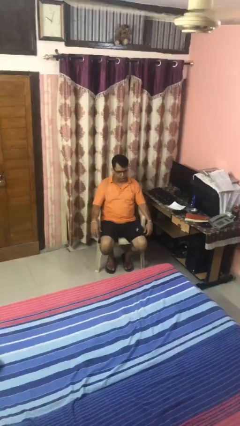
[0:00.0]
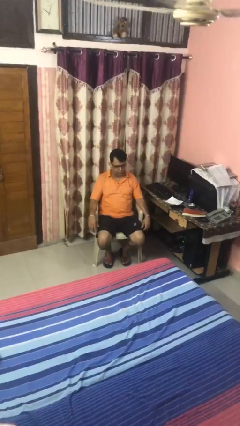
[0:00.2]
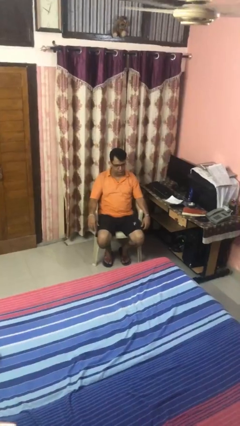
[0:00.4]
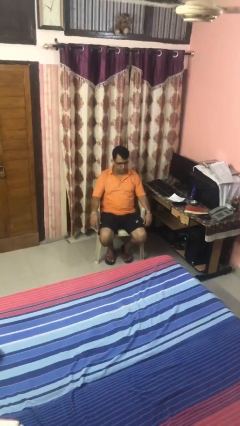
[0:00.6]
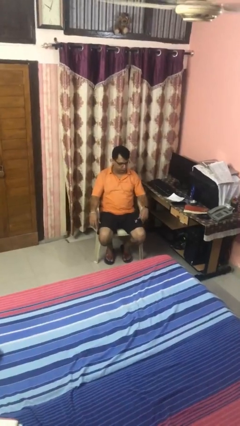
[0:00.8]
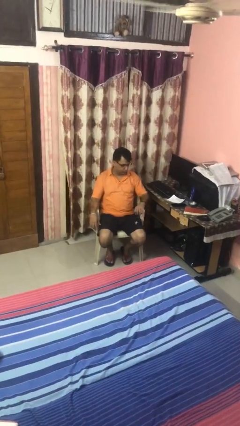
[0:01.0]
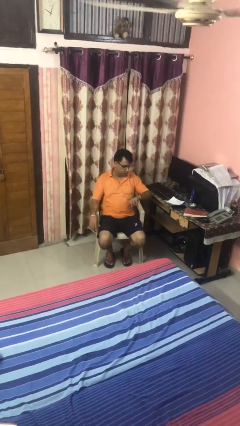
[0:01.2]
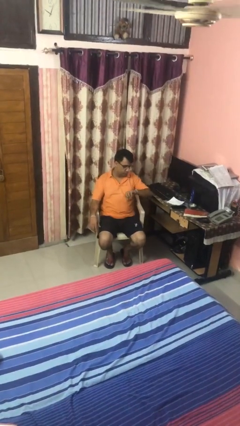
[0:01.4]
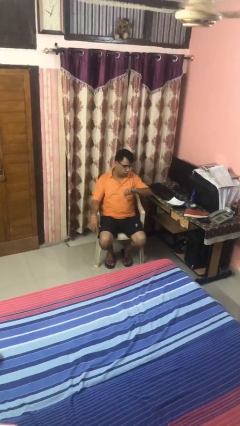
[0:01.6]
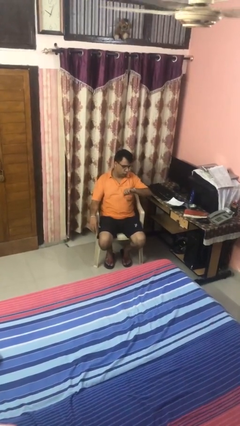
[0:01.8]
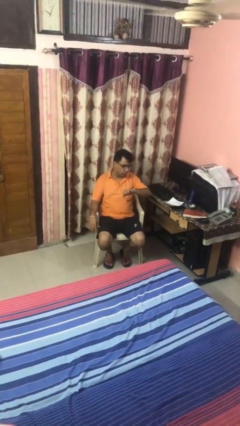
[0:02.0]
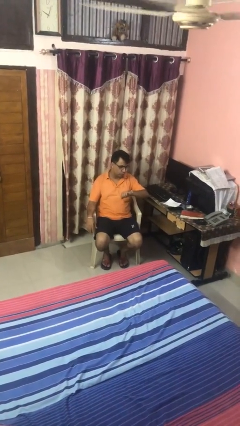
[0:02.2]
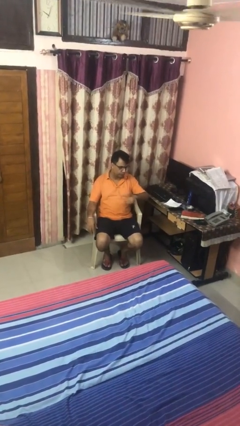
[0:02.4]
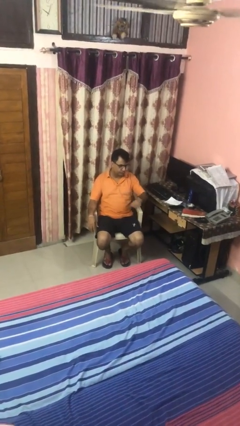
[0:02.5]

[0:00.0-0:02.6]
person looks at wristwatch

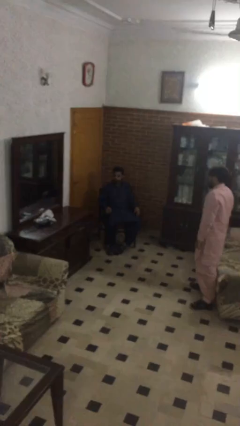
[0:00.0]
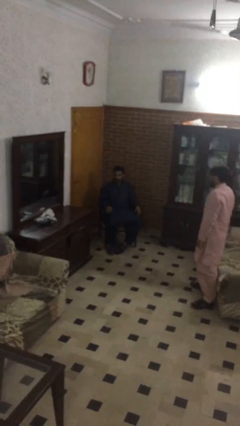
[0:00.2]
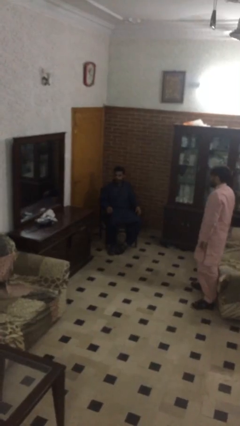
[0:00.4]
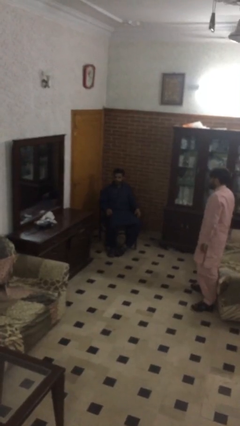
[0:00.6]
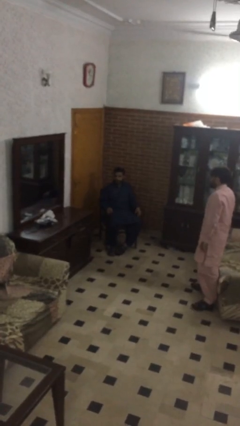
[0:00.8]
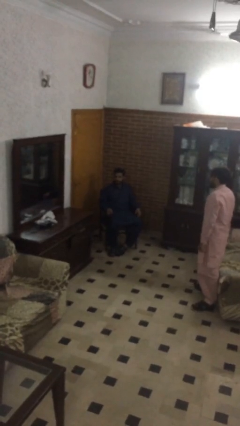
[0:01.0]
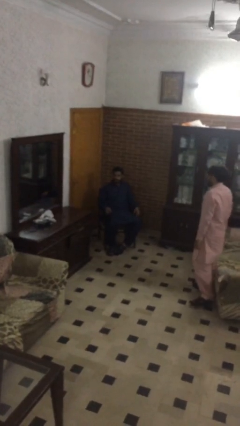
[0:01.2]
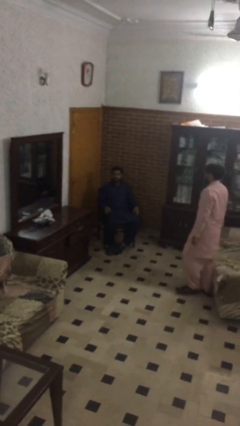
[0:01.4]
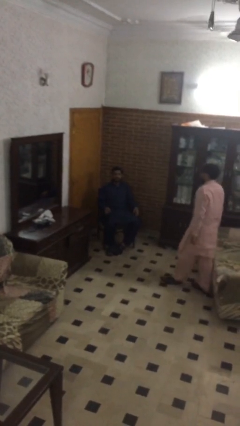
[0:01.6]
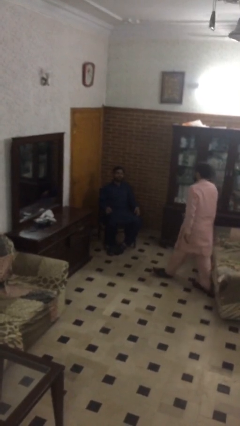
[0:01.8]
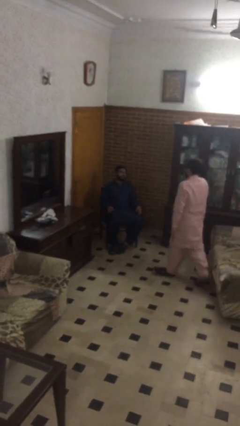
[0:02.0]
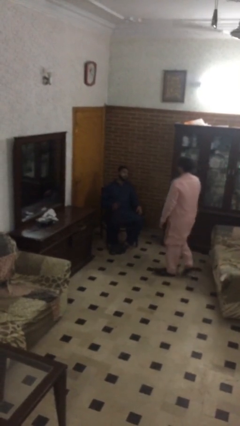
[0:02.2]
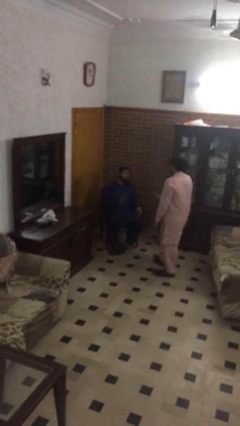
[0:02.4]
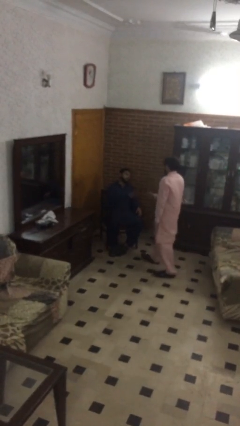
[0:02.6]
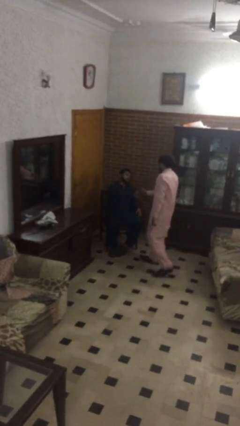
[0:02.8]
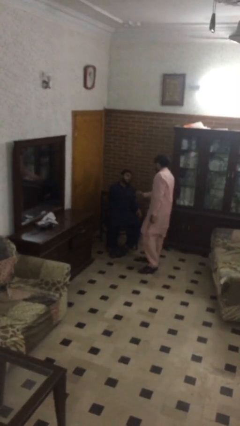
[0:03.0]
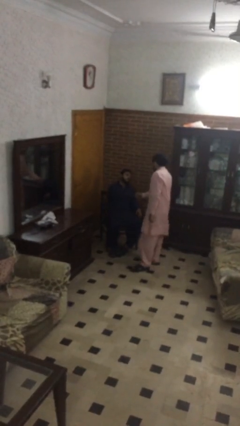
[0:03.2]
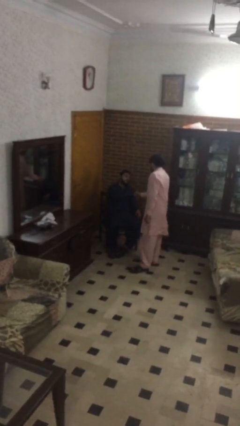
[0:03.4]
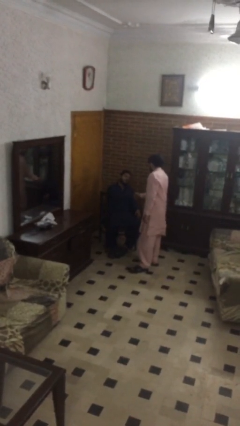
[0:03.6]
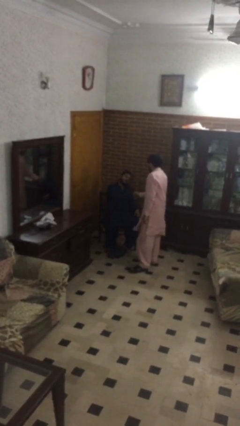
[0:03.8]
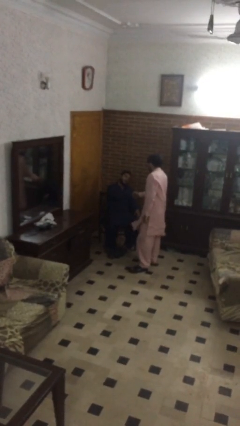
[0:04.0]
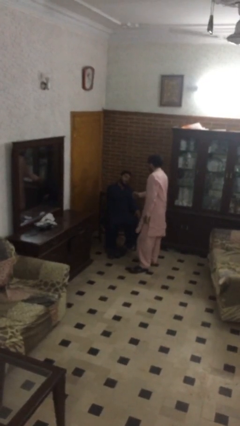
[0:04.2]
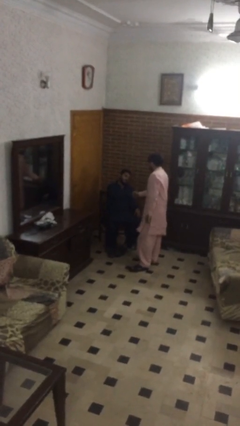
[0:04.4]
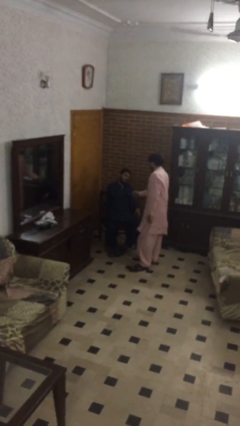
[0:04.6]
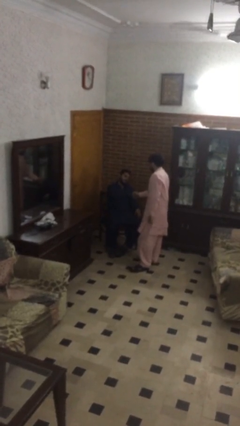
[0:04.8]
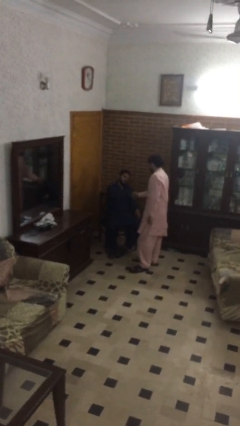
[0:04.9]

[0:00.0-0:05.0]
person shakes hand

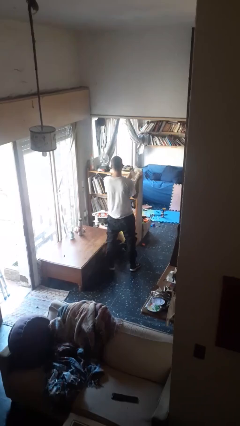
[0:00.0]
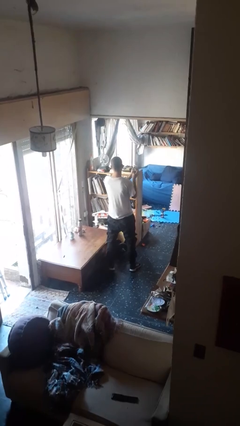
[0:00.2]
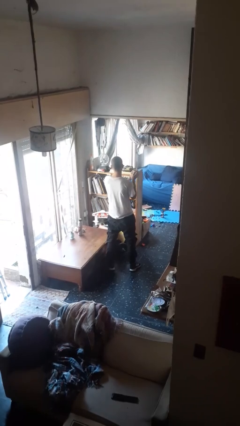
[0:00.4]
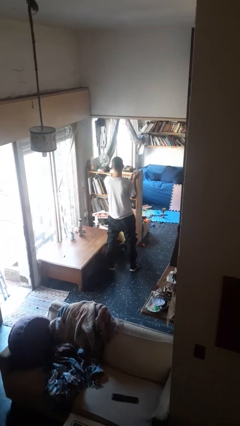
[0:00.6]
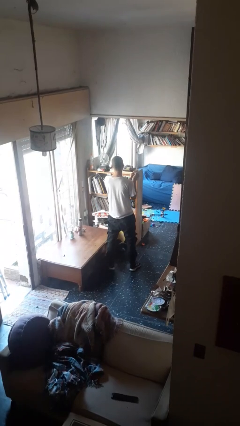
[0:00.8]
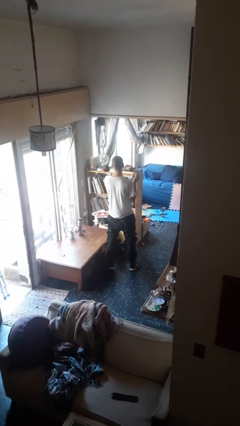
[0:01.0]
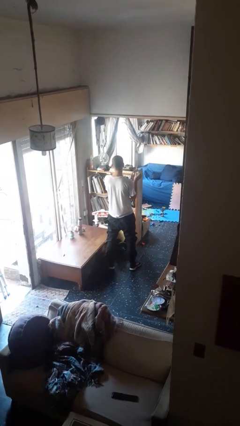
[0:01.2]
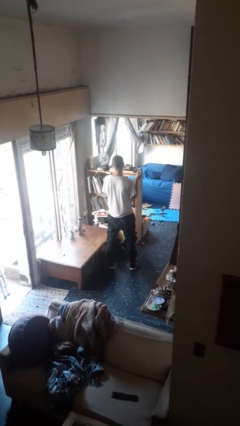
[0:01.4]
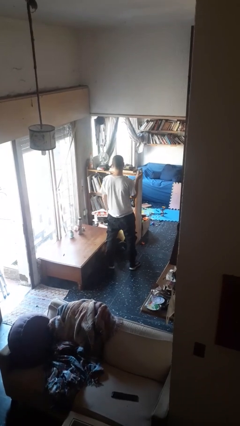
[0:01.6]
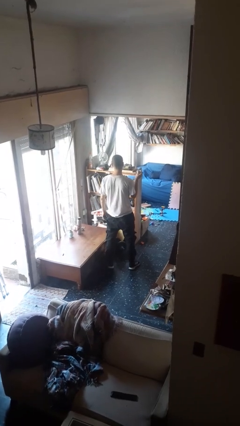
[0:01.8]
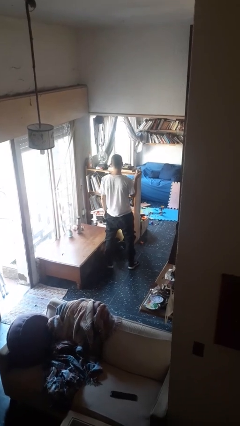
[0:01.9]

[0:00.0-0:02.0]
person crumples paper

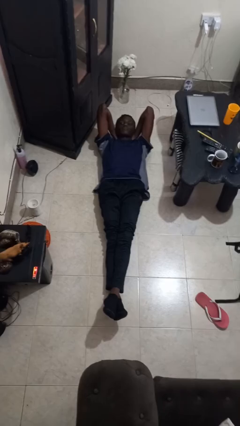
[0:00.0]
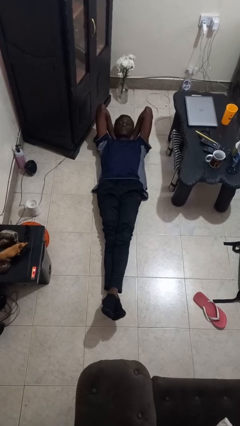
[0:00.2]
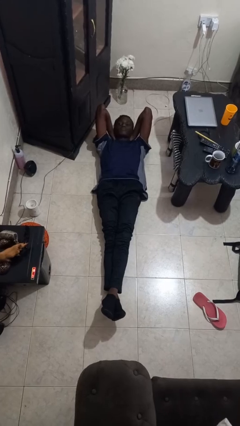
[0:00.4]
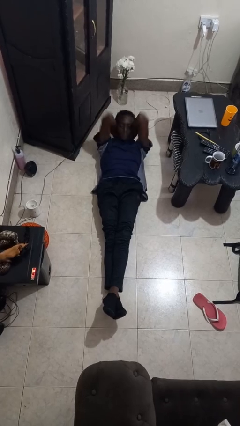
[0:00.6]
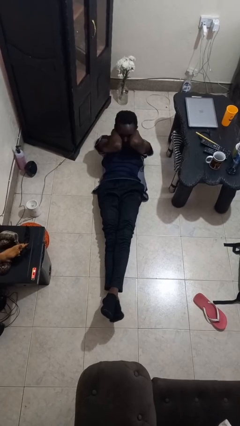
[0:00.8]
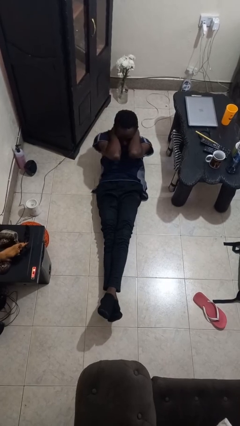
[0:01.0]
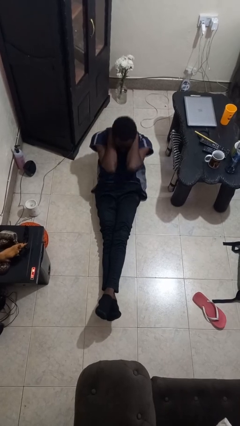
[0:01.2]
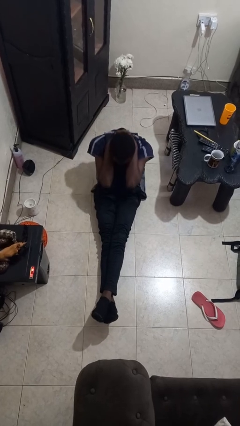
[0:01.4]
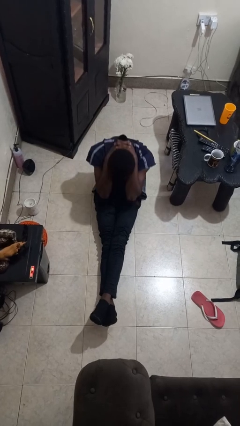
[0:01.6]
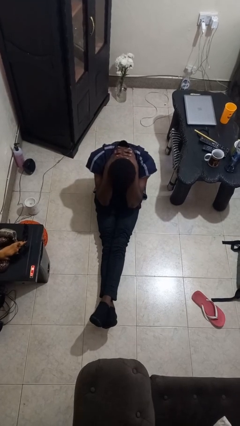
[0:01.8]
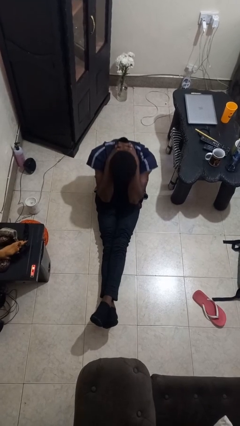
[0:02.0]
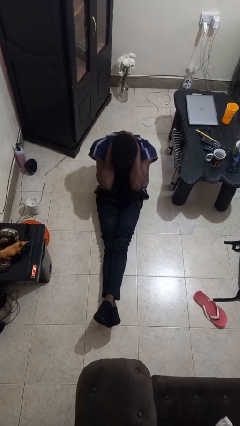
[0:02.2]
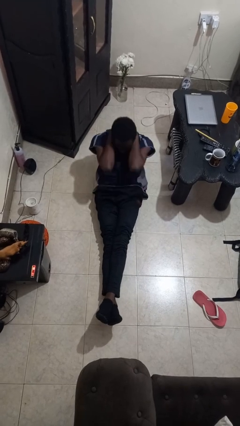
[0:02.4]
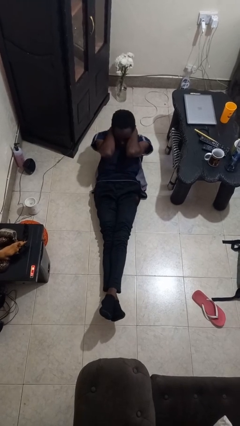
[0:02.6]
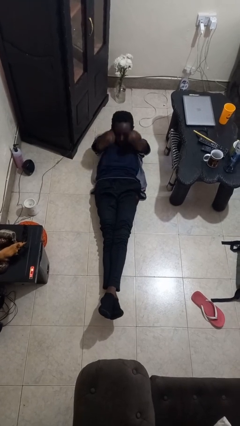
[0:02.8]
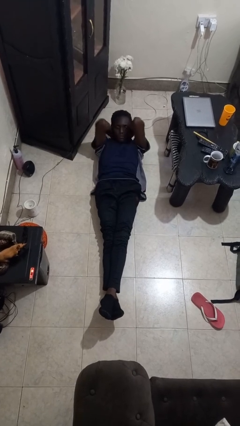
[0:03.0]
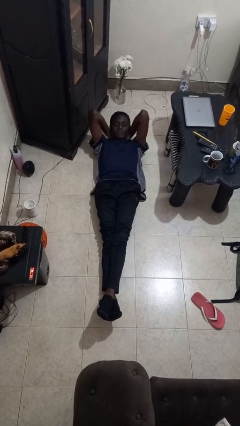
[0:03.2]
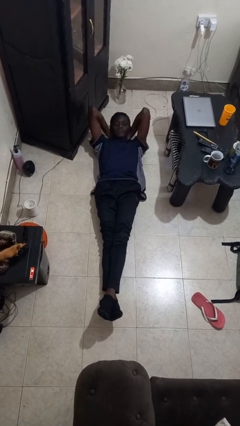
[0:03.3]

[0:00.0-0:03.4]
person exercises with situp

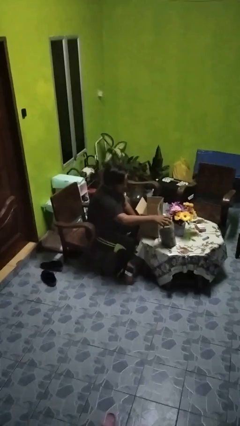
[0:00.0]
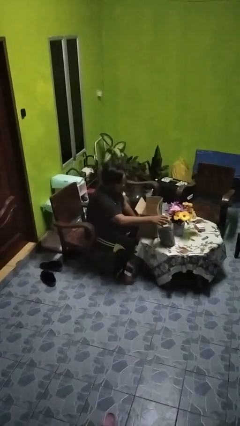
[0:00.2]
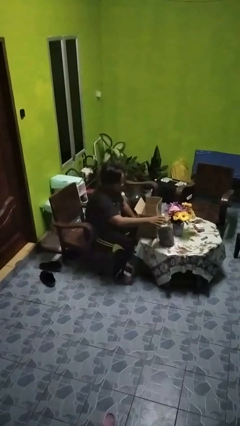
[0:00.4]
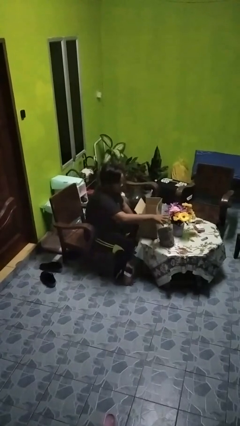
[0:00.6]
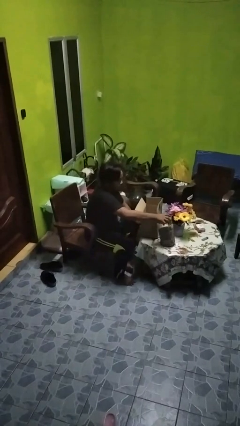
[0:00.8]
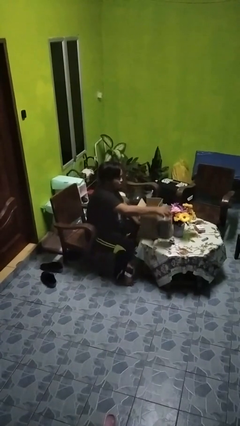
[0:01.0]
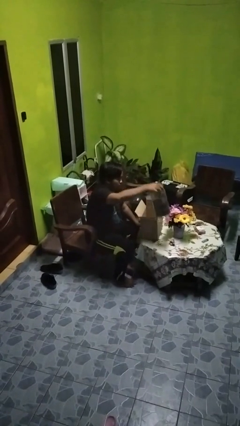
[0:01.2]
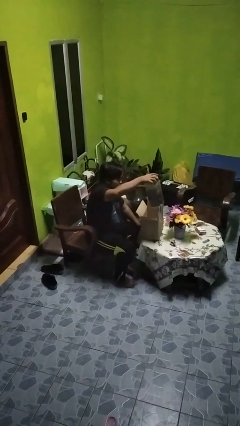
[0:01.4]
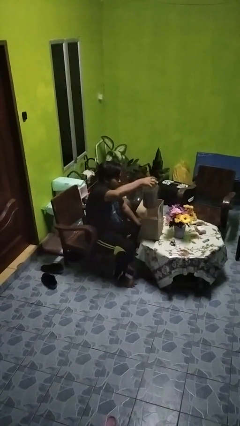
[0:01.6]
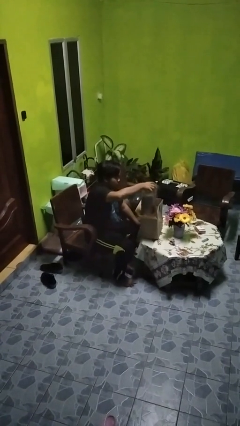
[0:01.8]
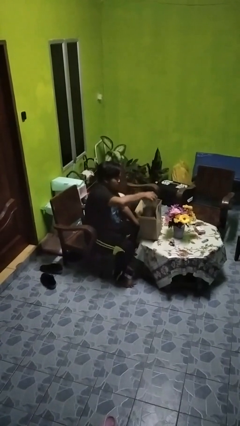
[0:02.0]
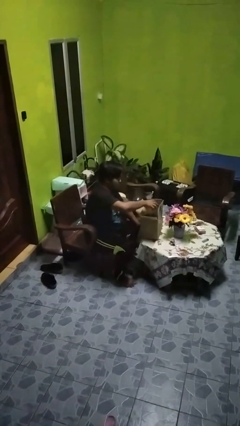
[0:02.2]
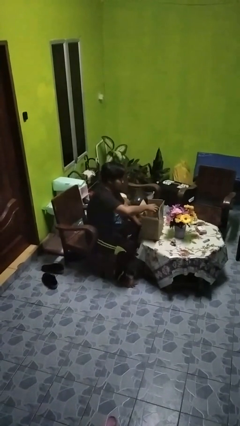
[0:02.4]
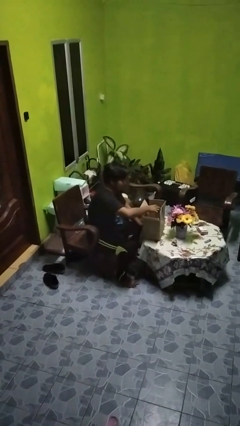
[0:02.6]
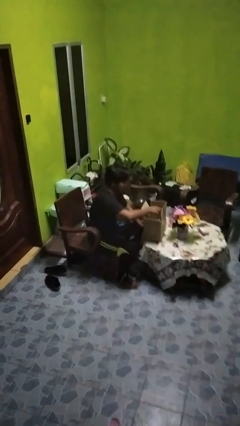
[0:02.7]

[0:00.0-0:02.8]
person puts object into box

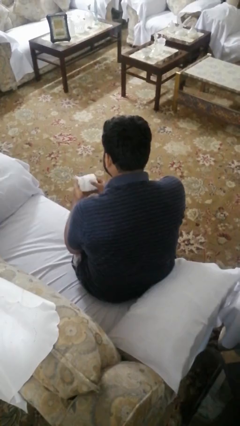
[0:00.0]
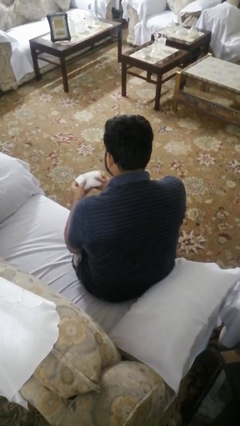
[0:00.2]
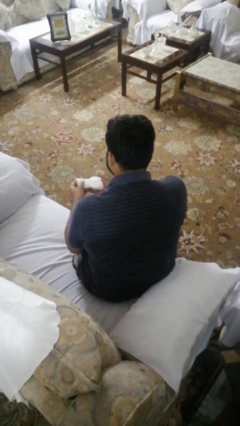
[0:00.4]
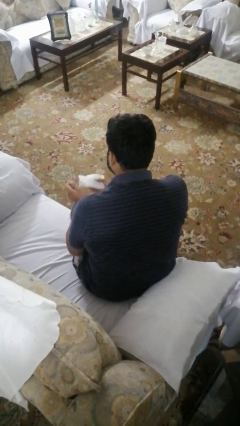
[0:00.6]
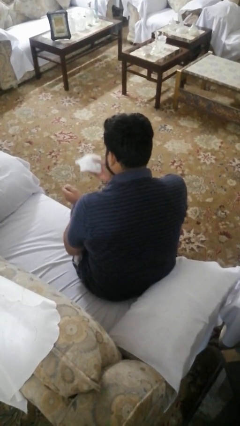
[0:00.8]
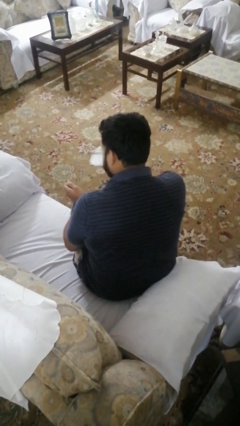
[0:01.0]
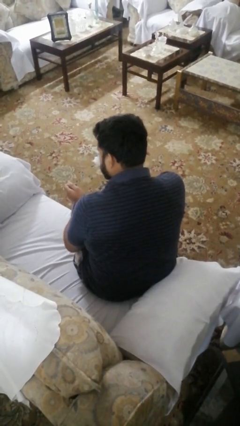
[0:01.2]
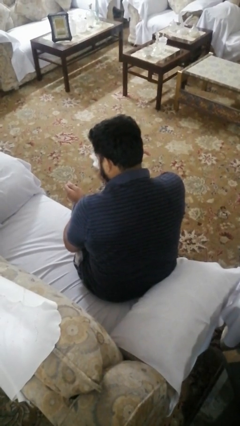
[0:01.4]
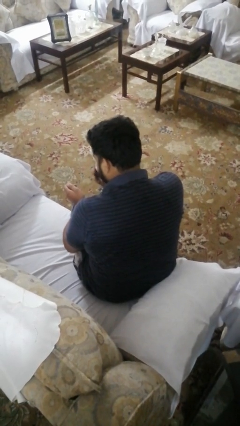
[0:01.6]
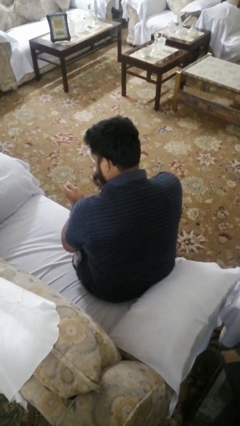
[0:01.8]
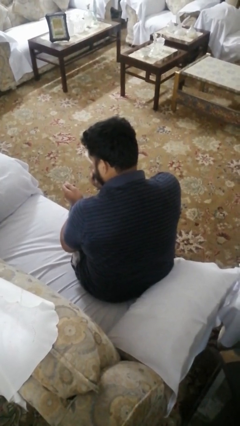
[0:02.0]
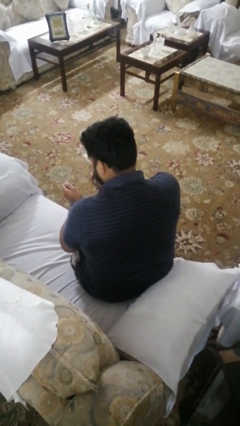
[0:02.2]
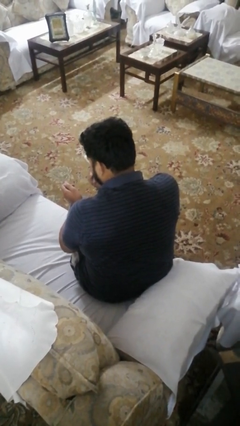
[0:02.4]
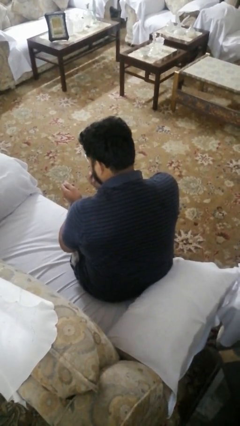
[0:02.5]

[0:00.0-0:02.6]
person blows nose
